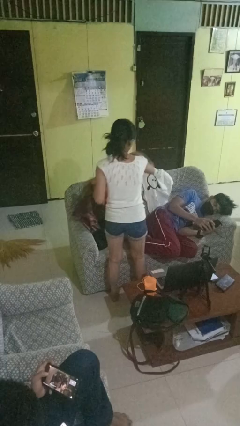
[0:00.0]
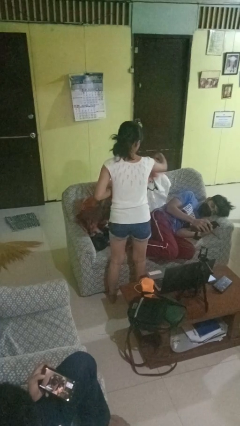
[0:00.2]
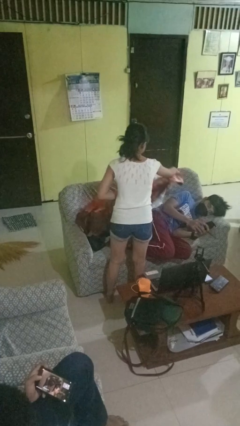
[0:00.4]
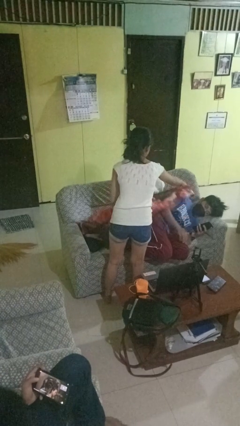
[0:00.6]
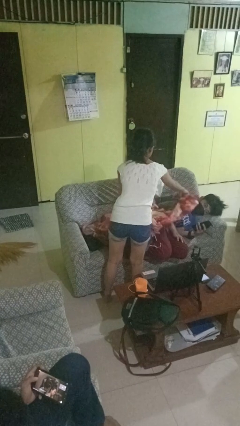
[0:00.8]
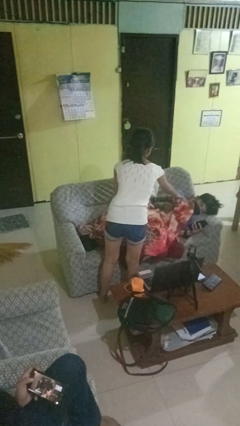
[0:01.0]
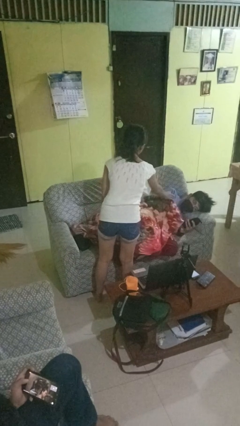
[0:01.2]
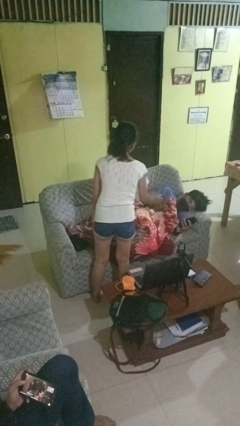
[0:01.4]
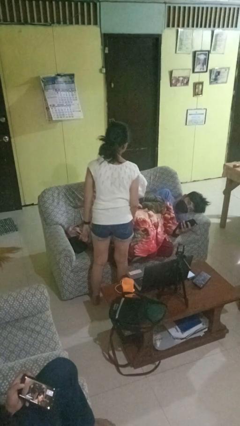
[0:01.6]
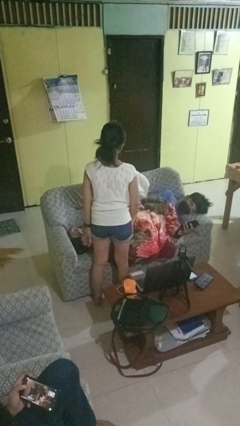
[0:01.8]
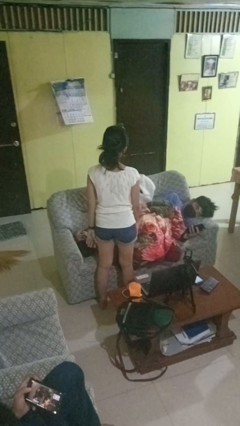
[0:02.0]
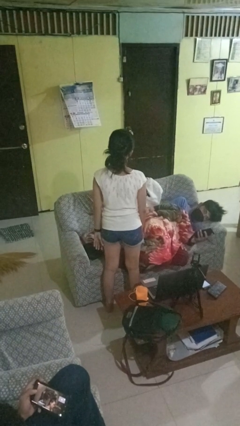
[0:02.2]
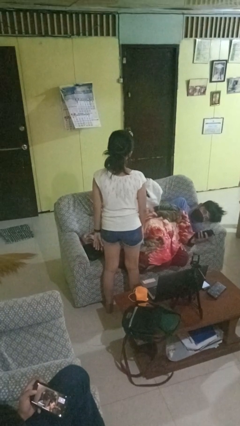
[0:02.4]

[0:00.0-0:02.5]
person covers friend with blanket

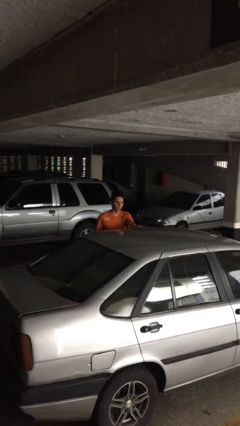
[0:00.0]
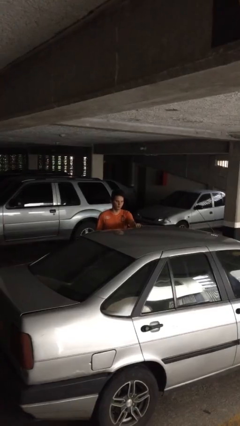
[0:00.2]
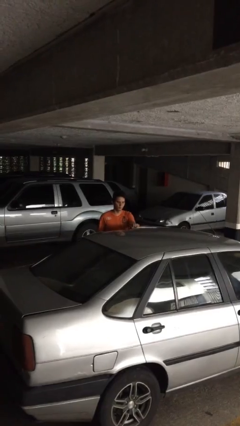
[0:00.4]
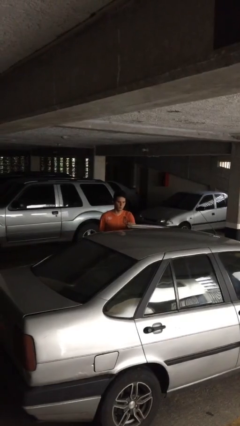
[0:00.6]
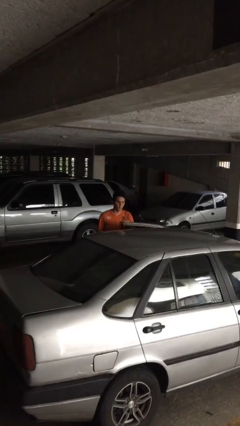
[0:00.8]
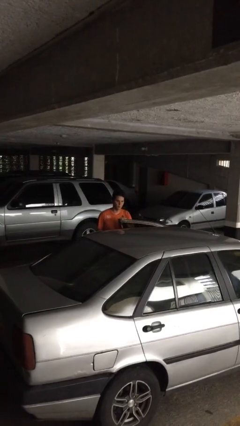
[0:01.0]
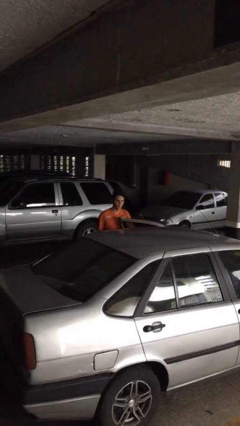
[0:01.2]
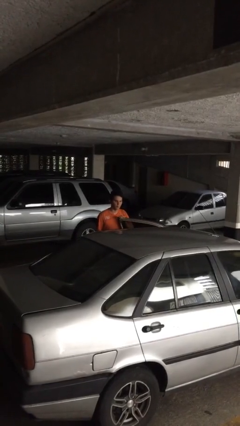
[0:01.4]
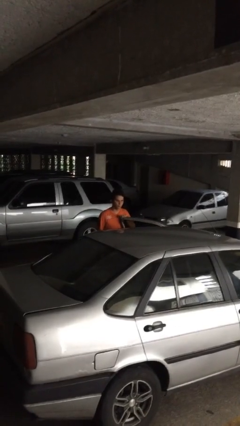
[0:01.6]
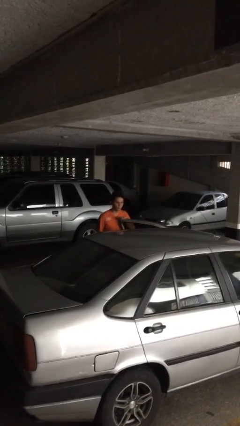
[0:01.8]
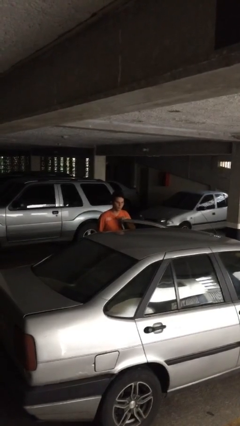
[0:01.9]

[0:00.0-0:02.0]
person opens car door

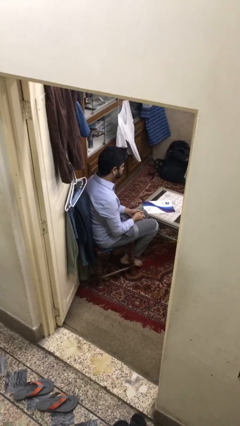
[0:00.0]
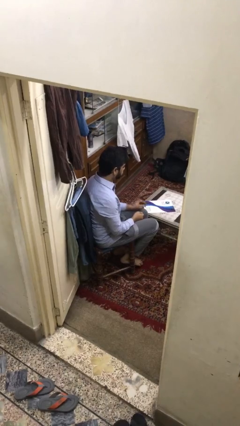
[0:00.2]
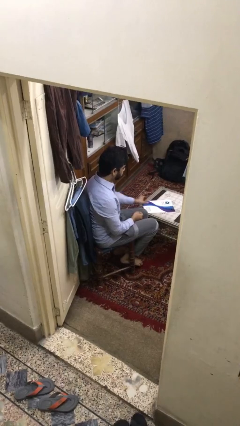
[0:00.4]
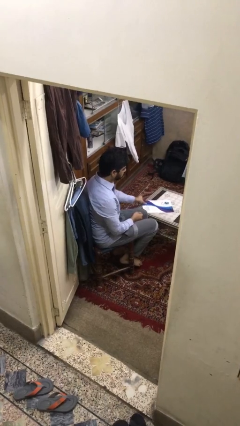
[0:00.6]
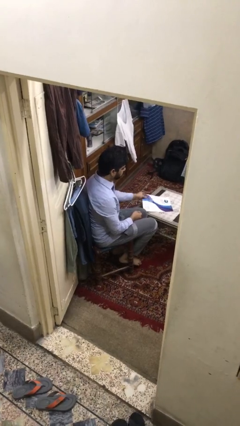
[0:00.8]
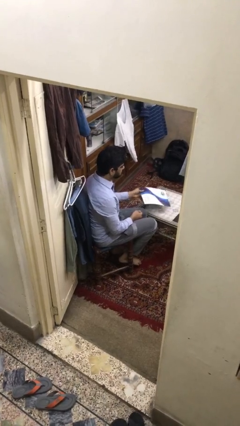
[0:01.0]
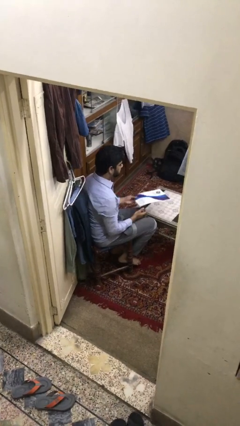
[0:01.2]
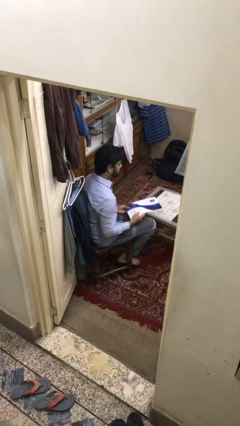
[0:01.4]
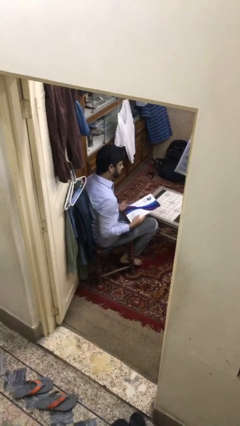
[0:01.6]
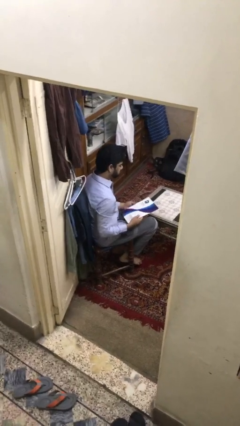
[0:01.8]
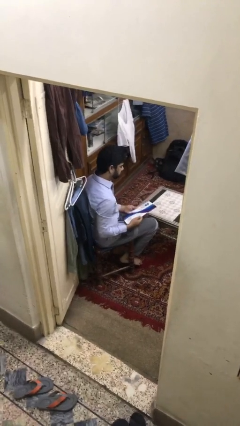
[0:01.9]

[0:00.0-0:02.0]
person picks up object from table

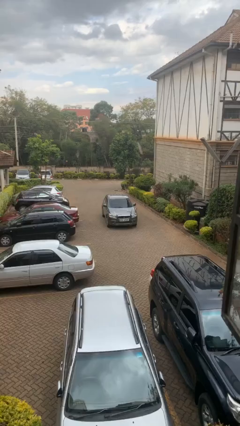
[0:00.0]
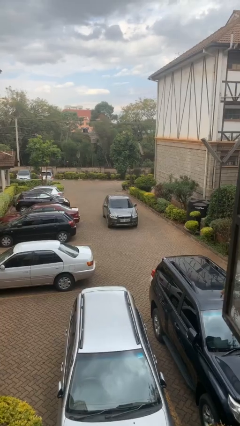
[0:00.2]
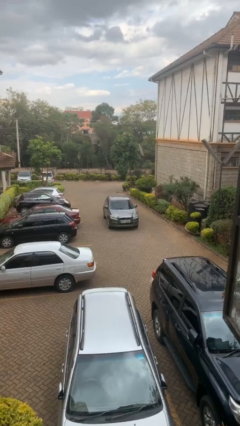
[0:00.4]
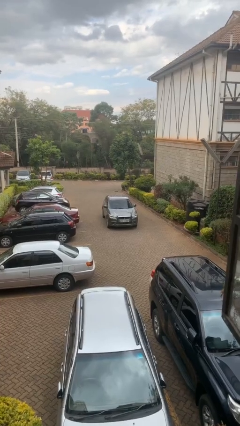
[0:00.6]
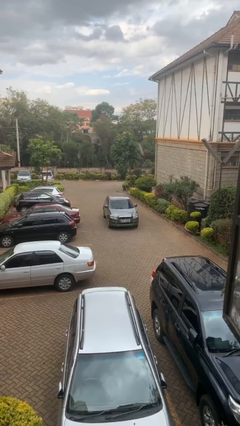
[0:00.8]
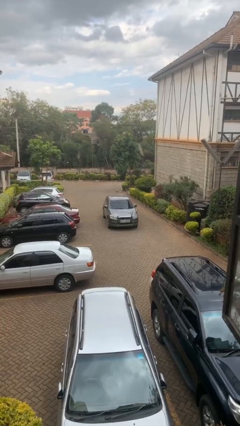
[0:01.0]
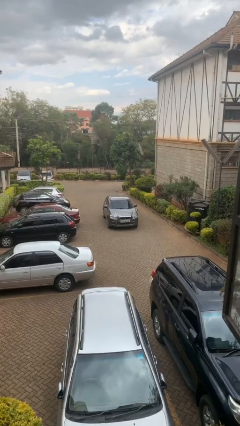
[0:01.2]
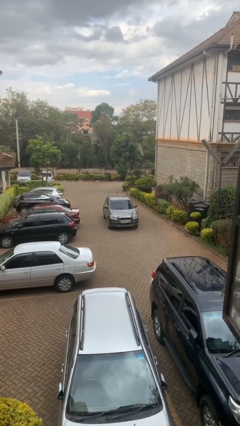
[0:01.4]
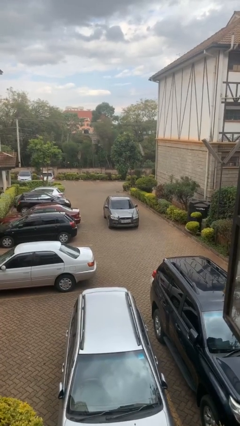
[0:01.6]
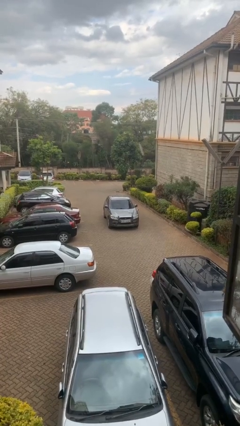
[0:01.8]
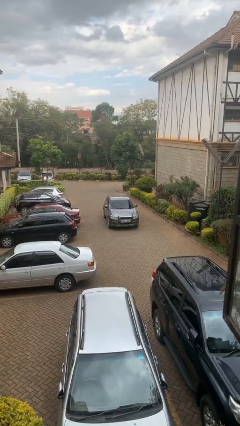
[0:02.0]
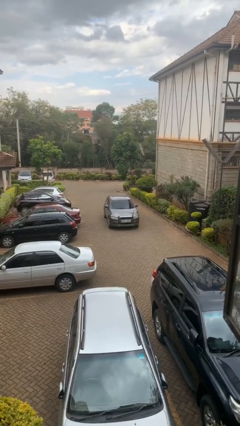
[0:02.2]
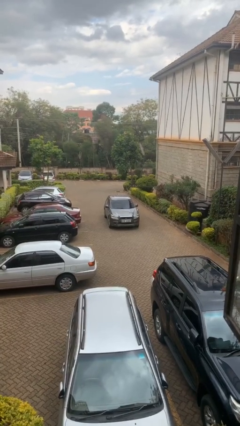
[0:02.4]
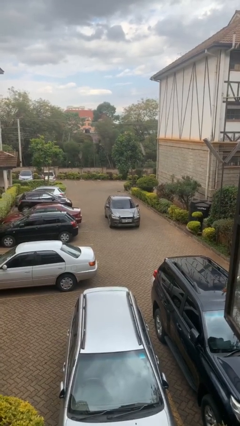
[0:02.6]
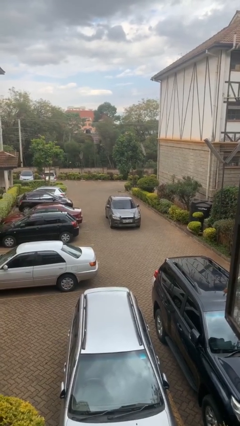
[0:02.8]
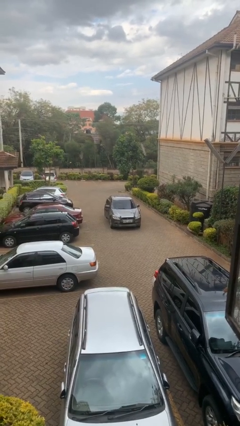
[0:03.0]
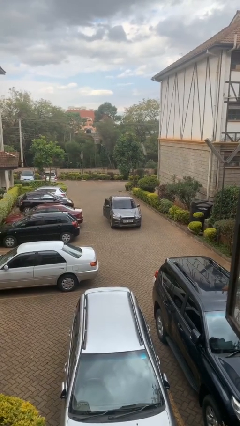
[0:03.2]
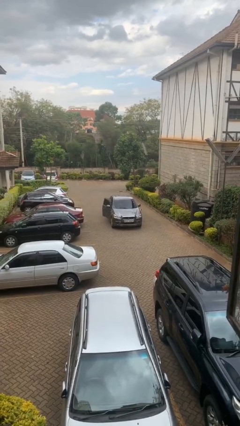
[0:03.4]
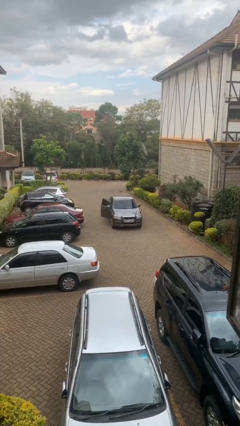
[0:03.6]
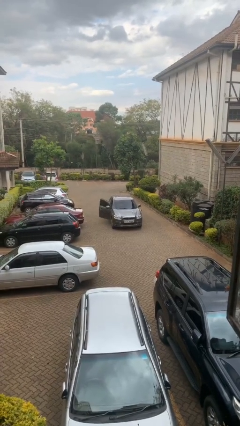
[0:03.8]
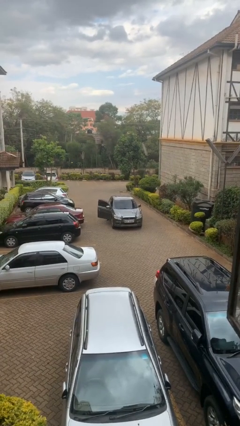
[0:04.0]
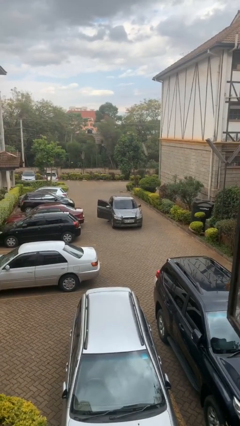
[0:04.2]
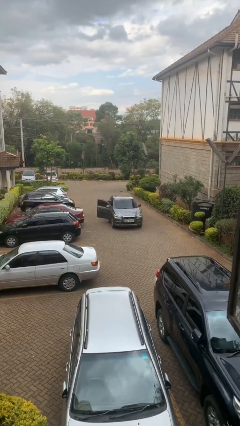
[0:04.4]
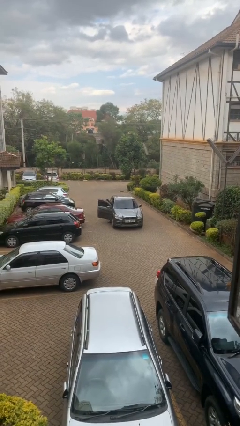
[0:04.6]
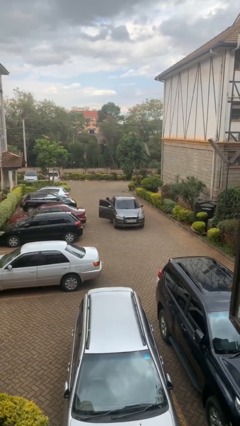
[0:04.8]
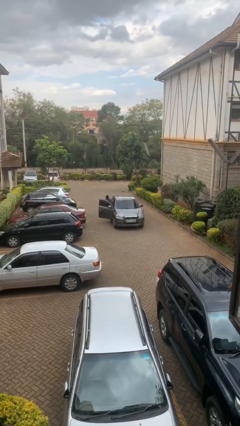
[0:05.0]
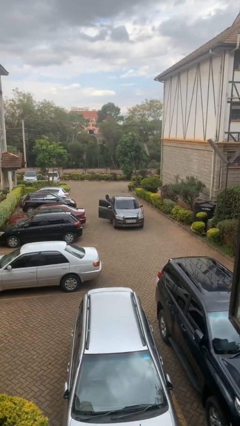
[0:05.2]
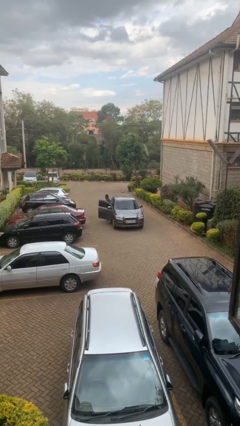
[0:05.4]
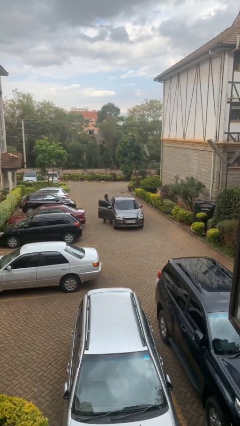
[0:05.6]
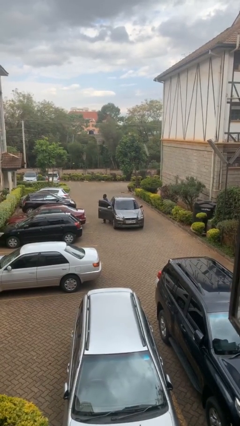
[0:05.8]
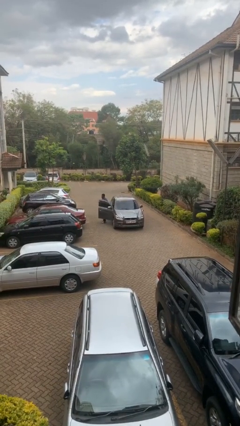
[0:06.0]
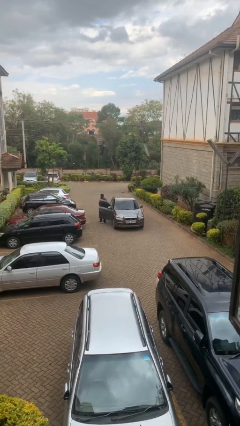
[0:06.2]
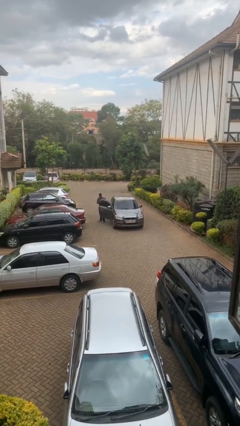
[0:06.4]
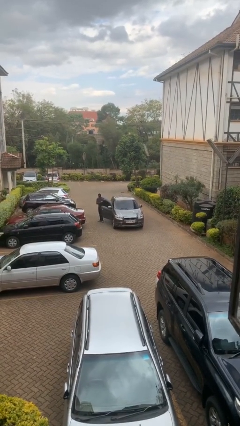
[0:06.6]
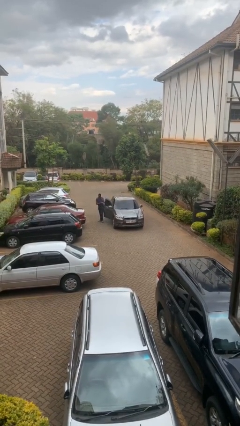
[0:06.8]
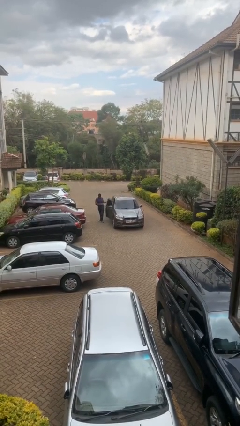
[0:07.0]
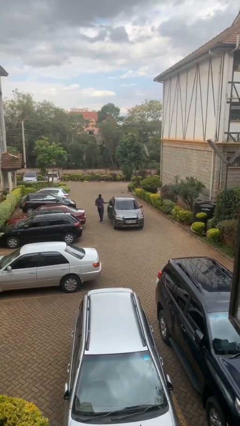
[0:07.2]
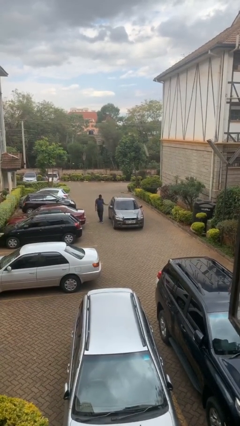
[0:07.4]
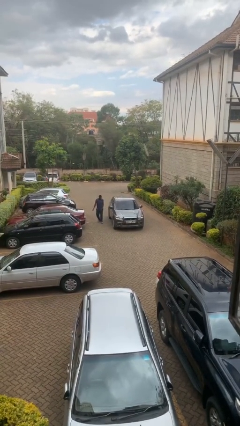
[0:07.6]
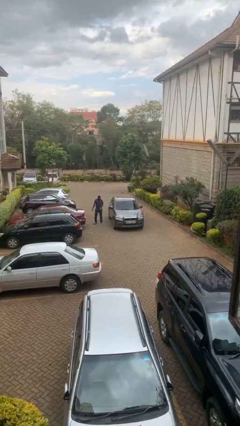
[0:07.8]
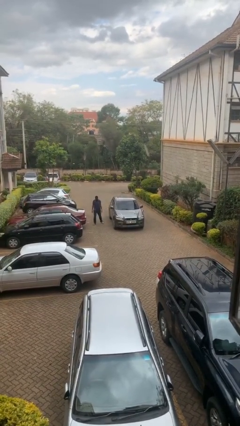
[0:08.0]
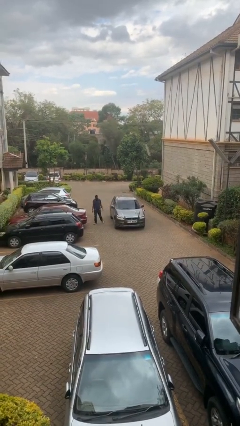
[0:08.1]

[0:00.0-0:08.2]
car drops off person

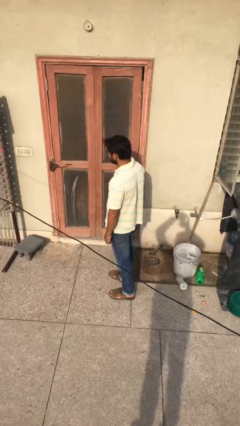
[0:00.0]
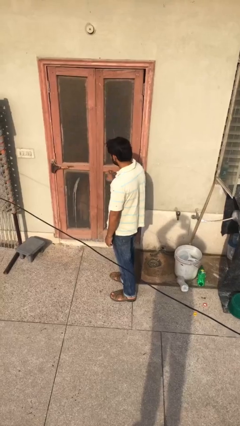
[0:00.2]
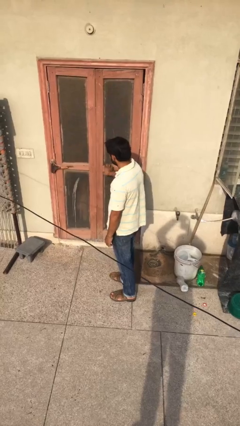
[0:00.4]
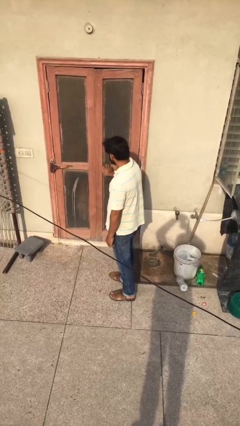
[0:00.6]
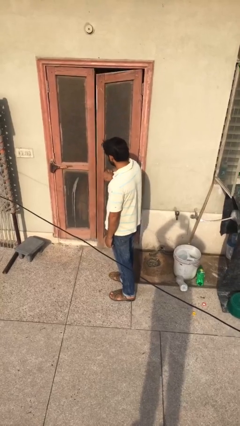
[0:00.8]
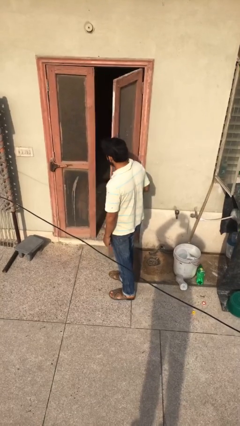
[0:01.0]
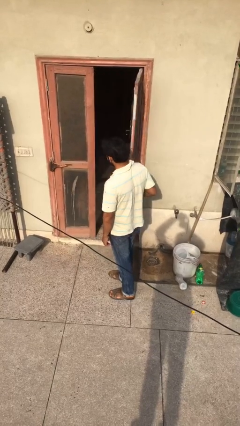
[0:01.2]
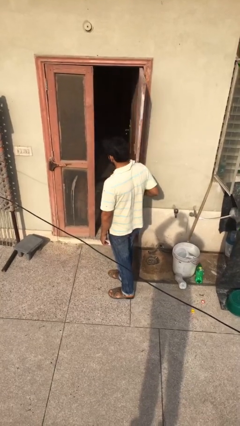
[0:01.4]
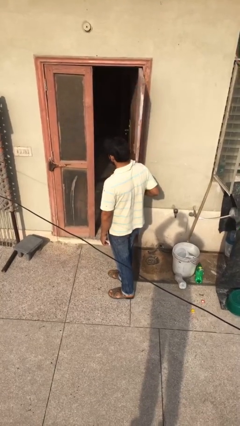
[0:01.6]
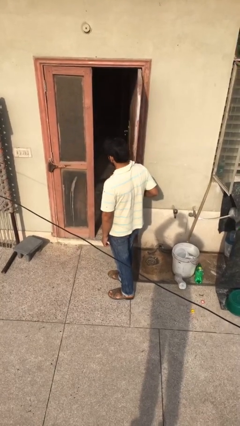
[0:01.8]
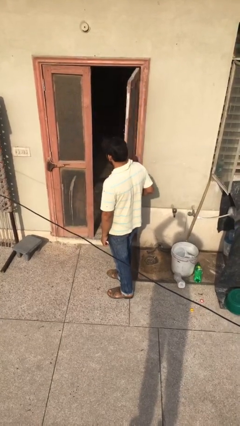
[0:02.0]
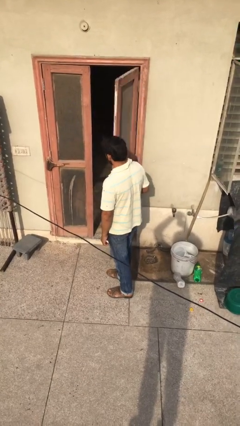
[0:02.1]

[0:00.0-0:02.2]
person opens facility door

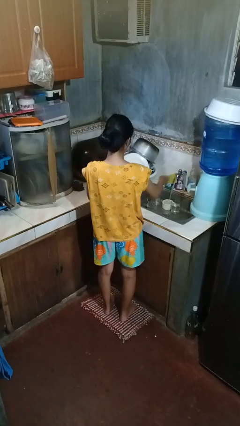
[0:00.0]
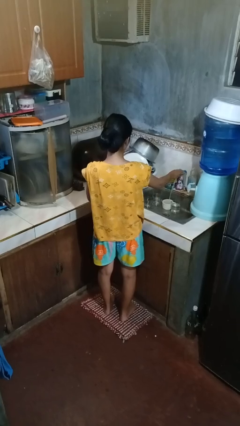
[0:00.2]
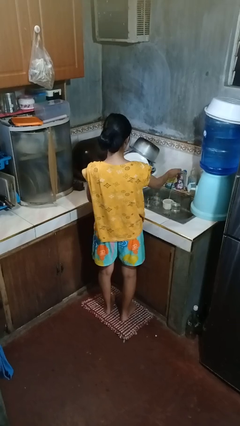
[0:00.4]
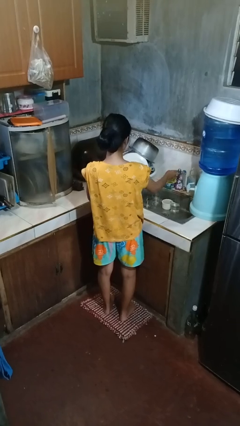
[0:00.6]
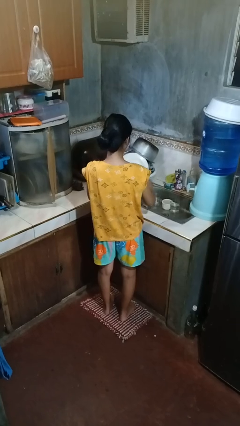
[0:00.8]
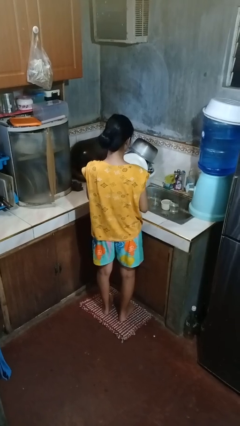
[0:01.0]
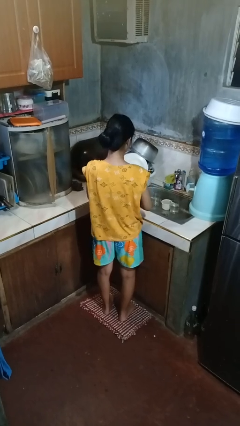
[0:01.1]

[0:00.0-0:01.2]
person turns off faucet
